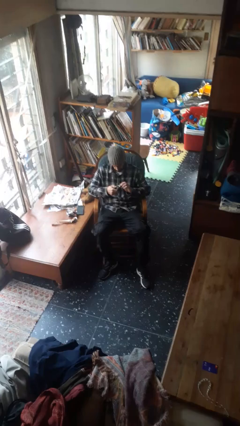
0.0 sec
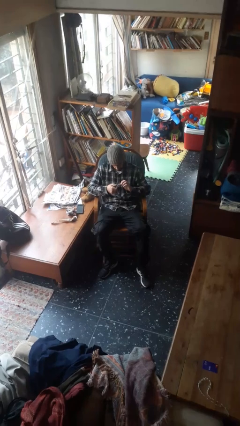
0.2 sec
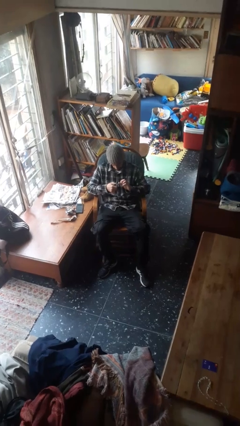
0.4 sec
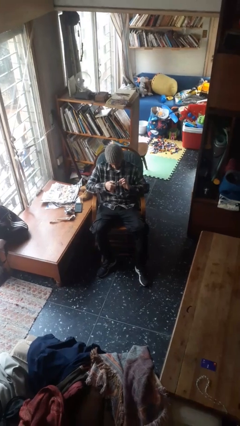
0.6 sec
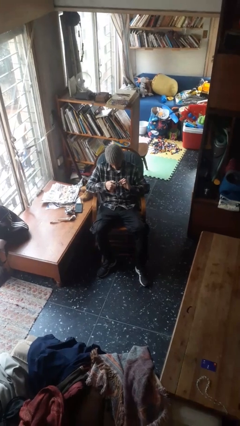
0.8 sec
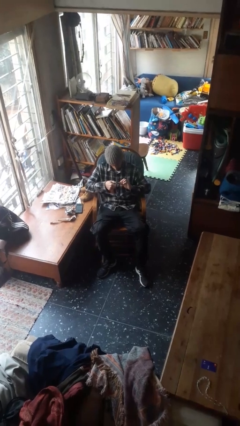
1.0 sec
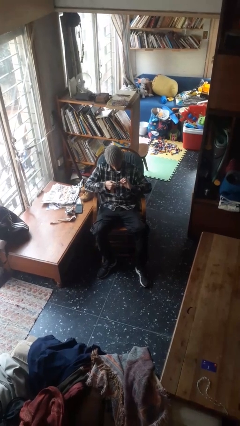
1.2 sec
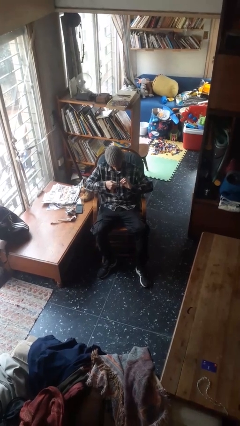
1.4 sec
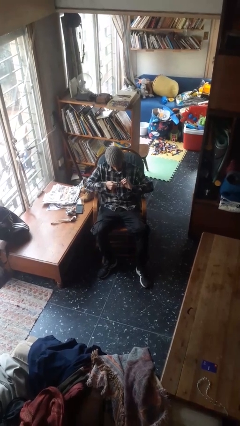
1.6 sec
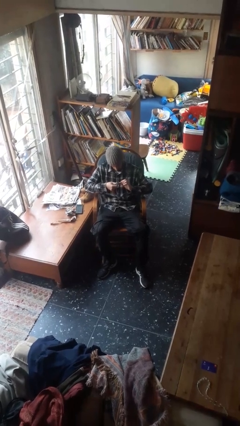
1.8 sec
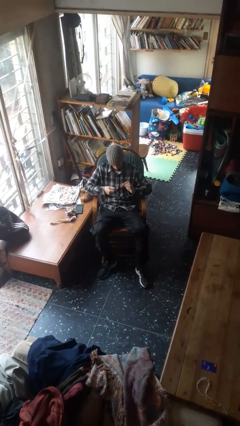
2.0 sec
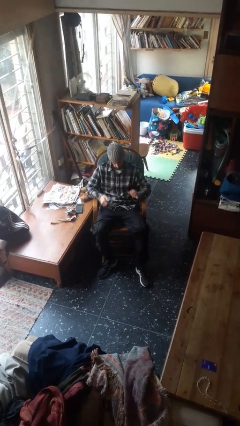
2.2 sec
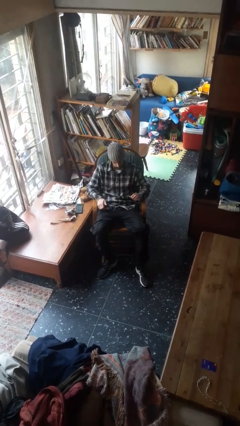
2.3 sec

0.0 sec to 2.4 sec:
person clips fingernails

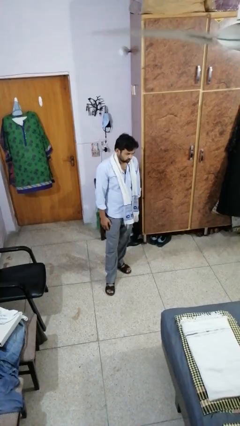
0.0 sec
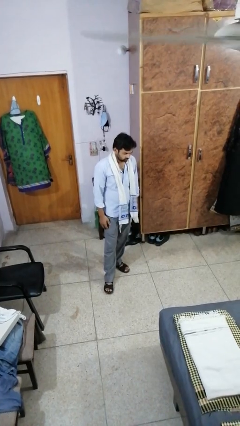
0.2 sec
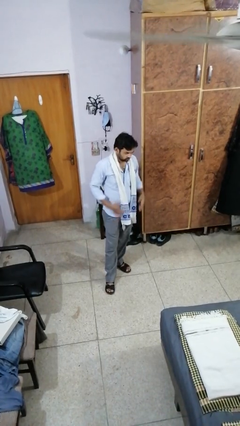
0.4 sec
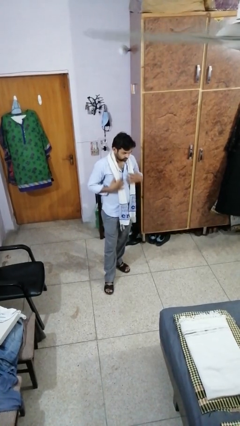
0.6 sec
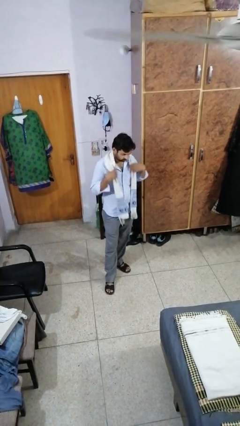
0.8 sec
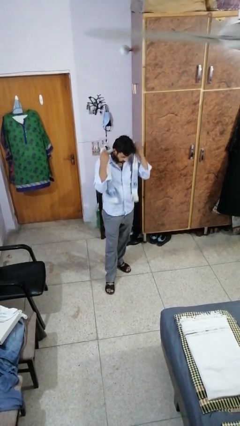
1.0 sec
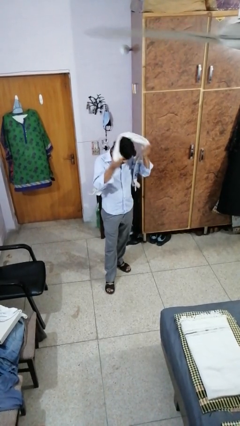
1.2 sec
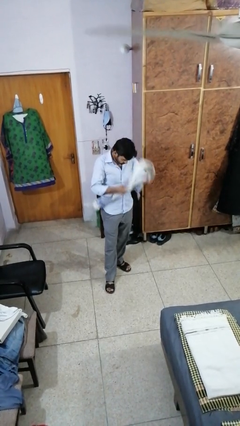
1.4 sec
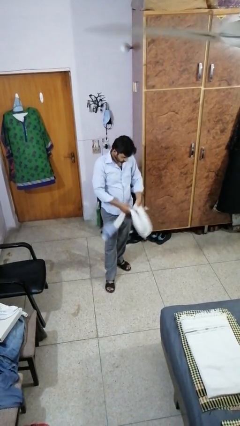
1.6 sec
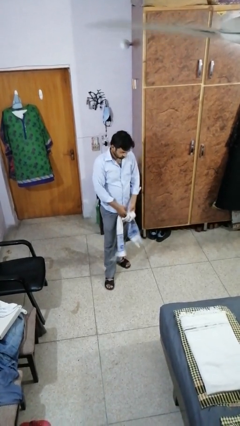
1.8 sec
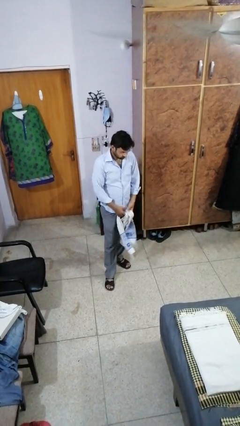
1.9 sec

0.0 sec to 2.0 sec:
person takes off scarf

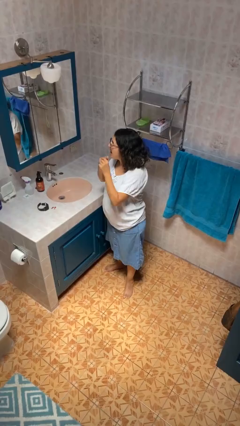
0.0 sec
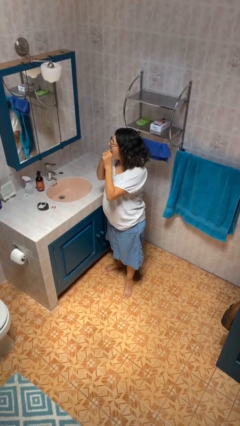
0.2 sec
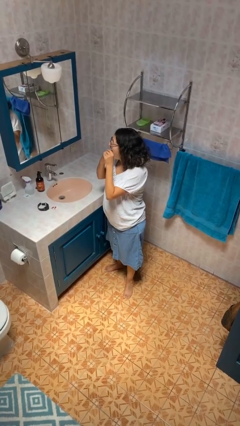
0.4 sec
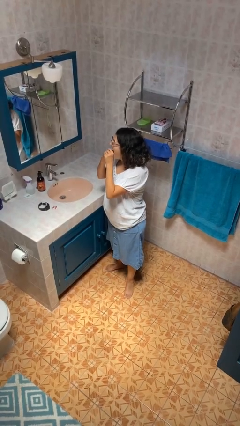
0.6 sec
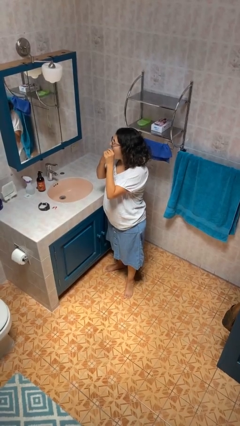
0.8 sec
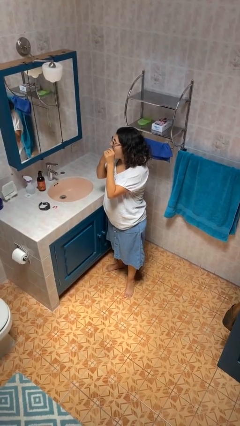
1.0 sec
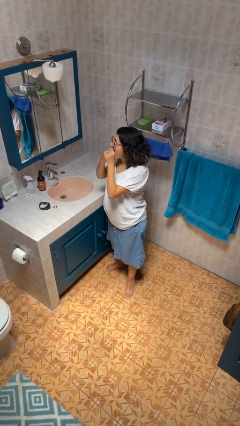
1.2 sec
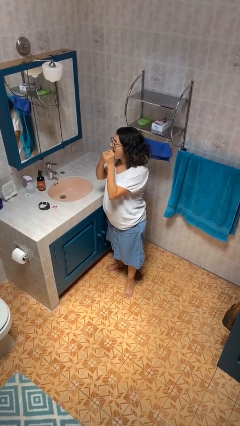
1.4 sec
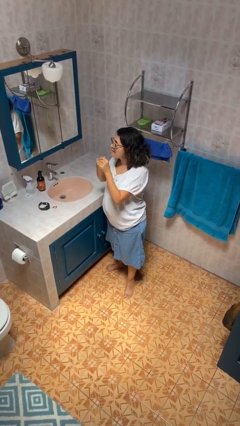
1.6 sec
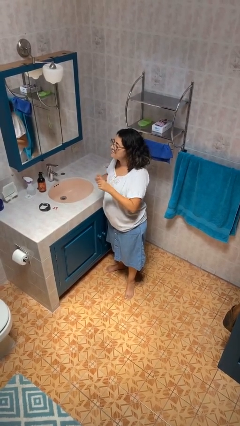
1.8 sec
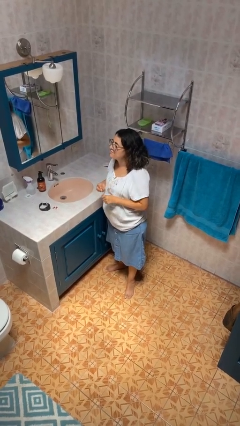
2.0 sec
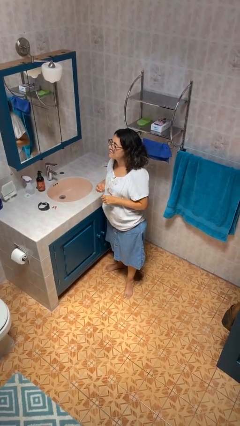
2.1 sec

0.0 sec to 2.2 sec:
person flosses

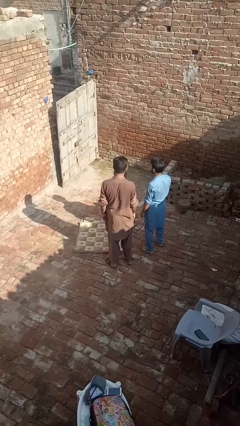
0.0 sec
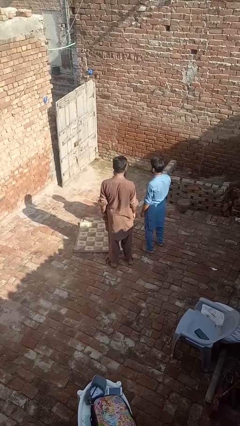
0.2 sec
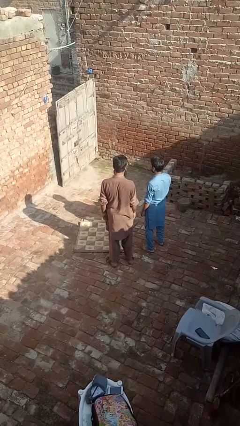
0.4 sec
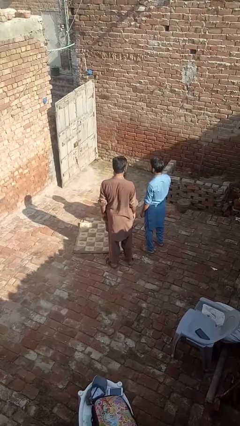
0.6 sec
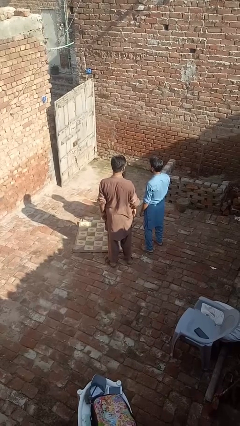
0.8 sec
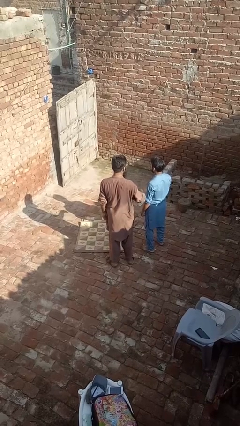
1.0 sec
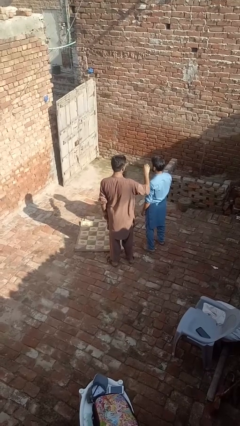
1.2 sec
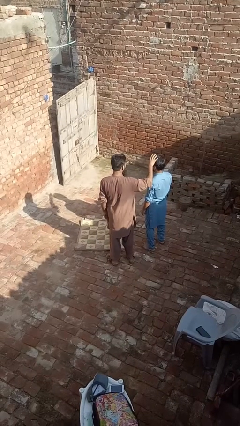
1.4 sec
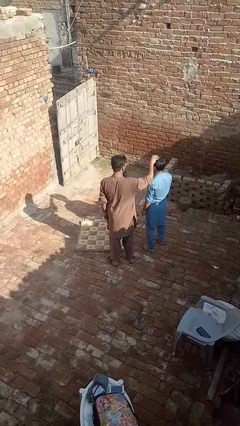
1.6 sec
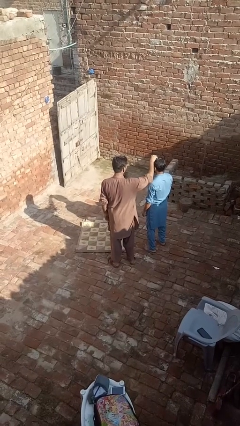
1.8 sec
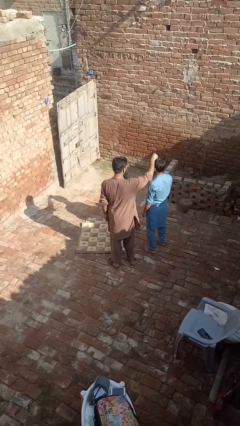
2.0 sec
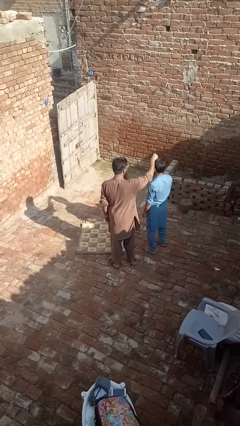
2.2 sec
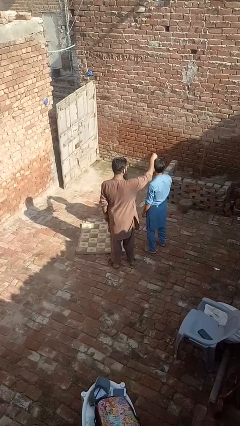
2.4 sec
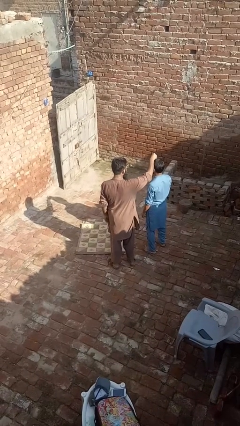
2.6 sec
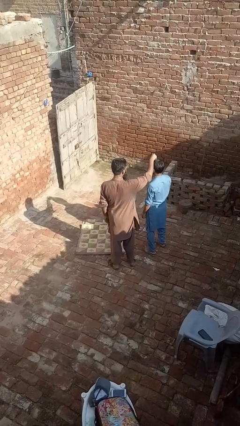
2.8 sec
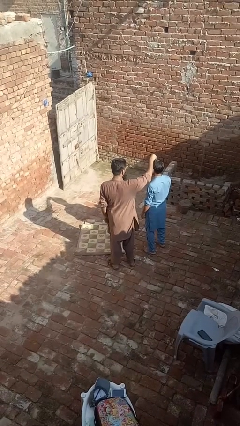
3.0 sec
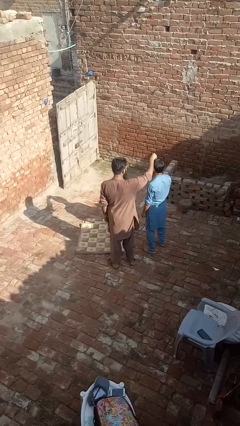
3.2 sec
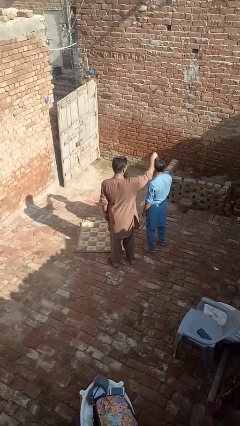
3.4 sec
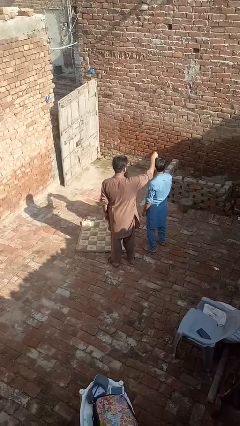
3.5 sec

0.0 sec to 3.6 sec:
person grabs person by hair

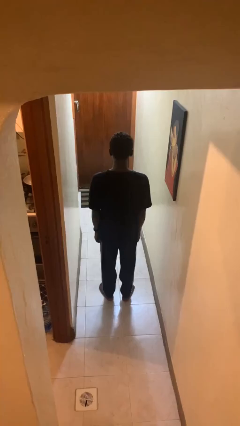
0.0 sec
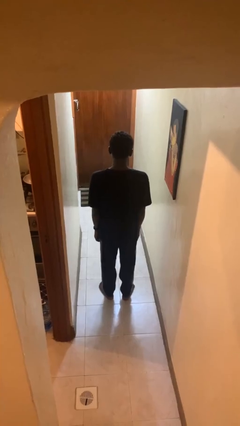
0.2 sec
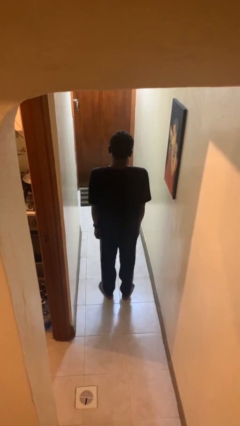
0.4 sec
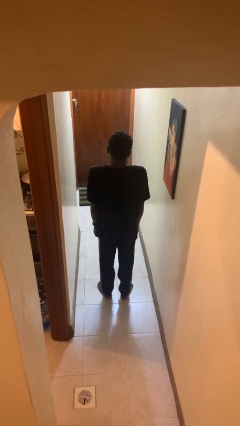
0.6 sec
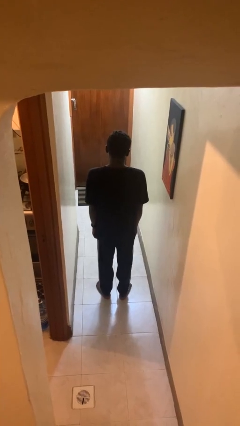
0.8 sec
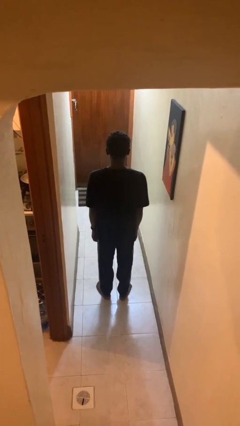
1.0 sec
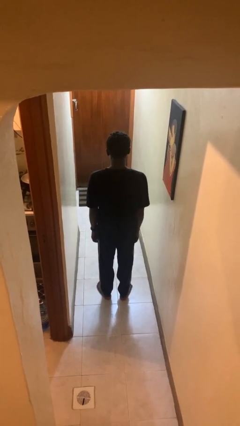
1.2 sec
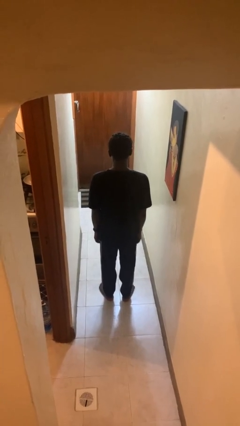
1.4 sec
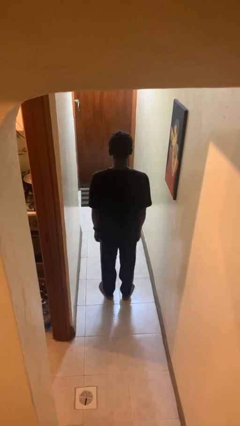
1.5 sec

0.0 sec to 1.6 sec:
person shrugs

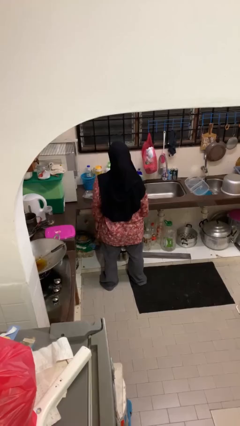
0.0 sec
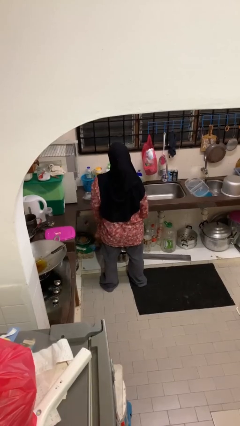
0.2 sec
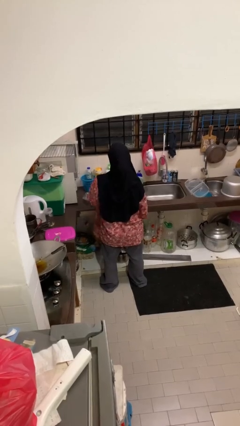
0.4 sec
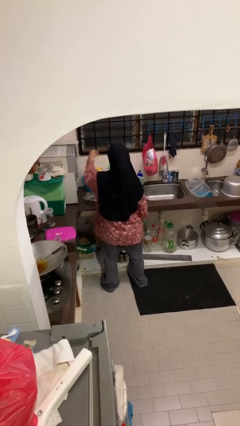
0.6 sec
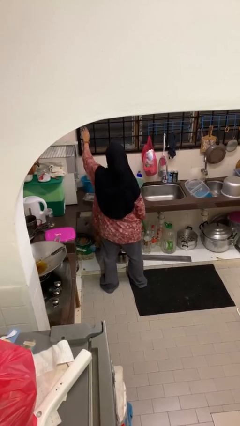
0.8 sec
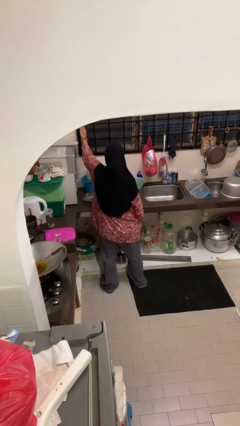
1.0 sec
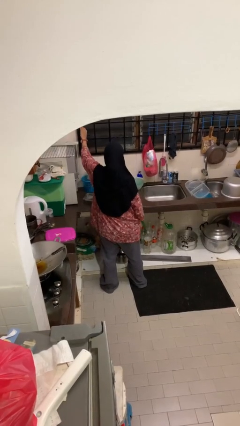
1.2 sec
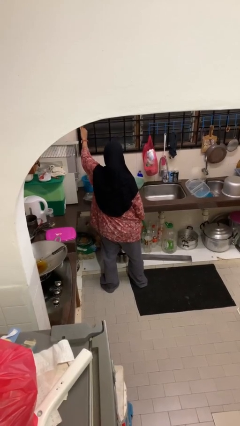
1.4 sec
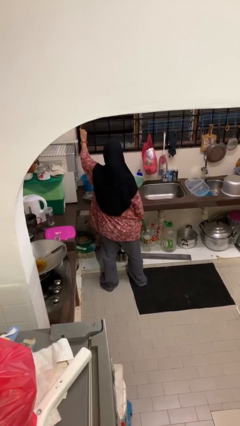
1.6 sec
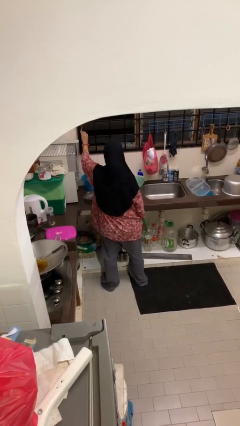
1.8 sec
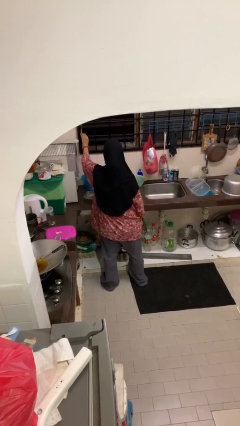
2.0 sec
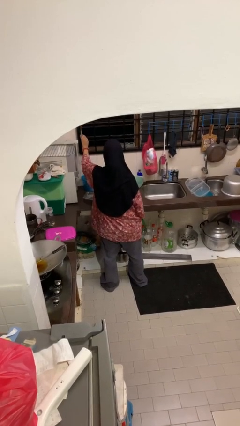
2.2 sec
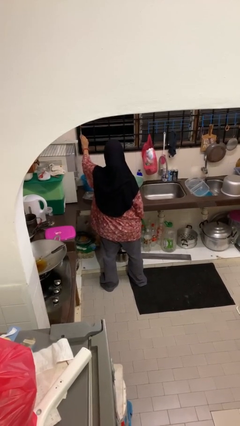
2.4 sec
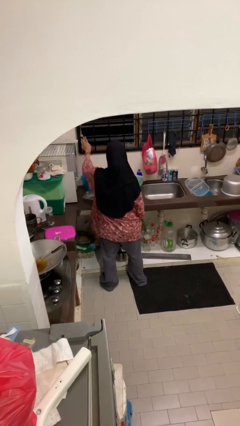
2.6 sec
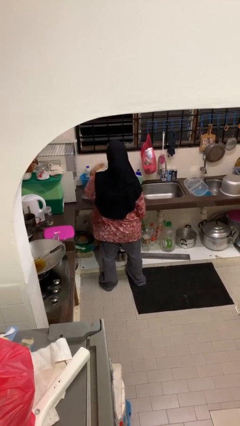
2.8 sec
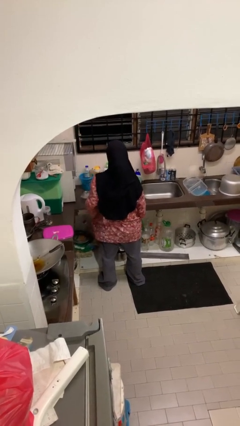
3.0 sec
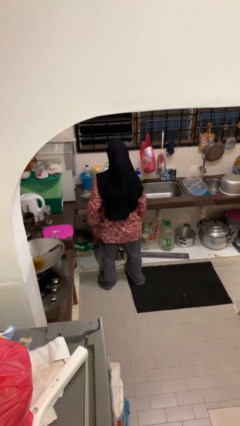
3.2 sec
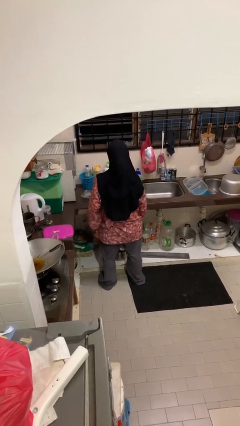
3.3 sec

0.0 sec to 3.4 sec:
person opens home window

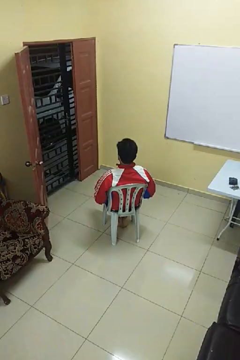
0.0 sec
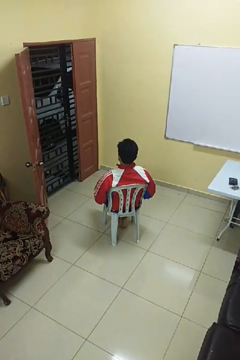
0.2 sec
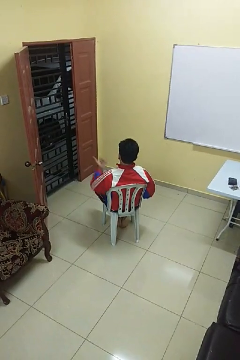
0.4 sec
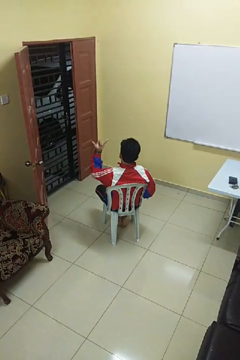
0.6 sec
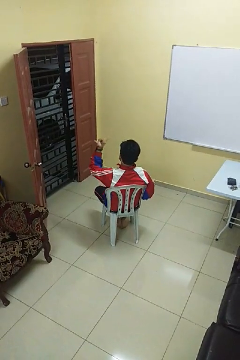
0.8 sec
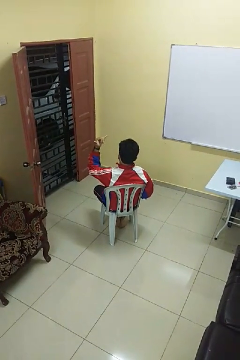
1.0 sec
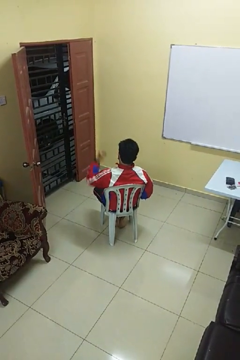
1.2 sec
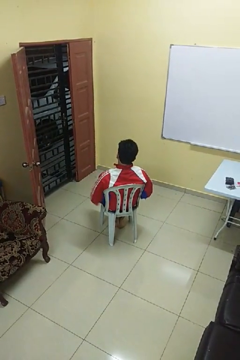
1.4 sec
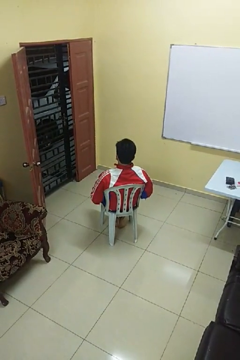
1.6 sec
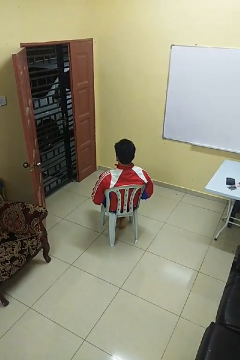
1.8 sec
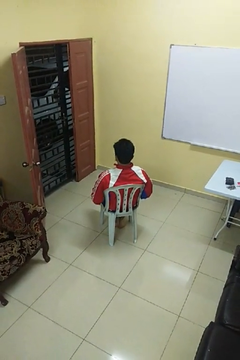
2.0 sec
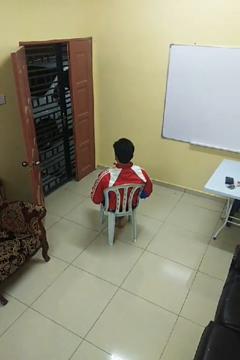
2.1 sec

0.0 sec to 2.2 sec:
person gestures hang loose
